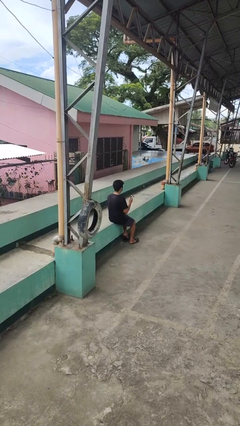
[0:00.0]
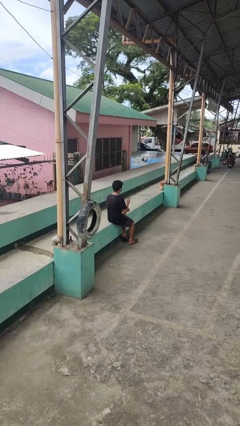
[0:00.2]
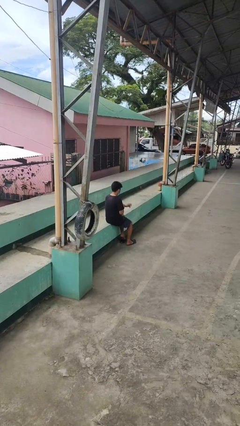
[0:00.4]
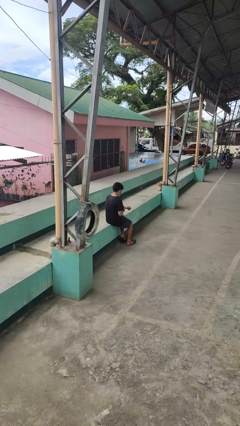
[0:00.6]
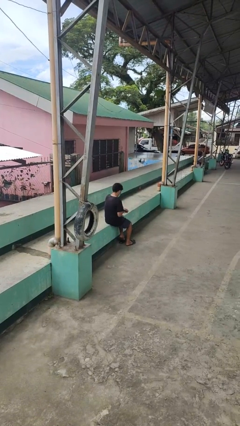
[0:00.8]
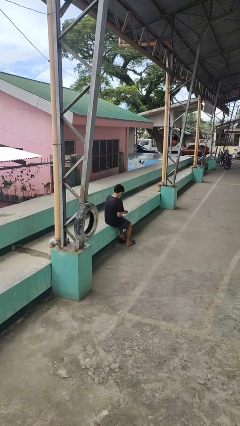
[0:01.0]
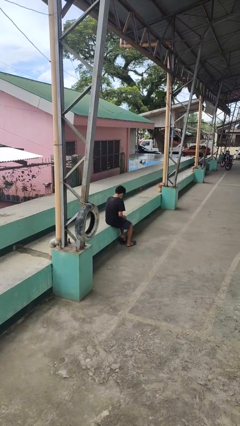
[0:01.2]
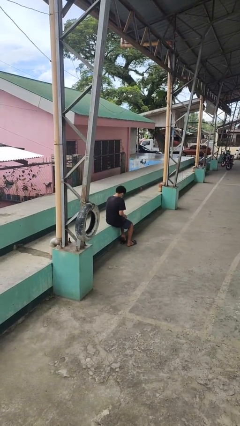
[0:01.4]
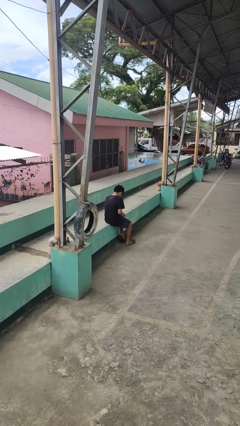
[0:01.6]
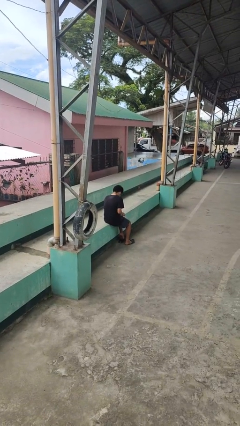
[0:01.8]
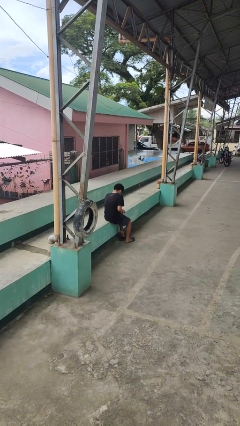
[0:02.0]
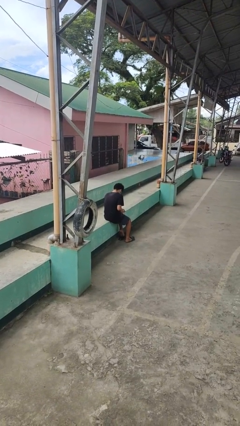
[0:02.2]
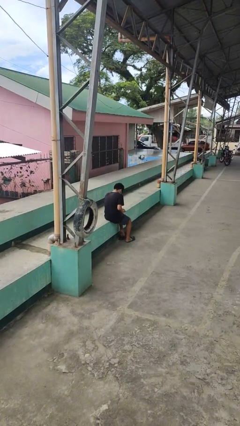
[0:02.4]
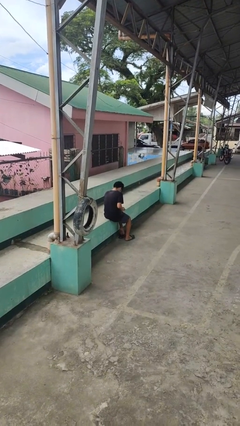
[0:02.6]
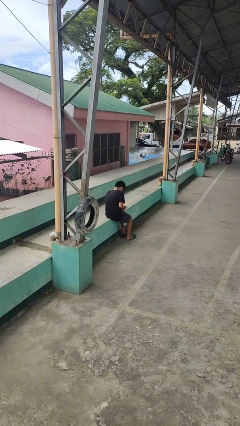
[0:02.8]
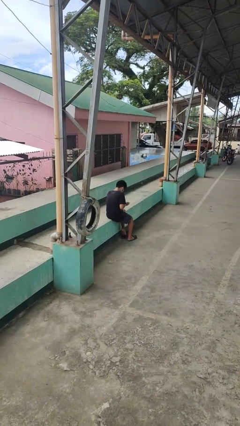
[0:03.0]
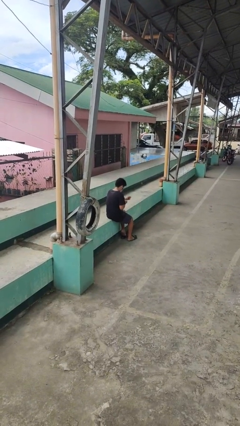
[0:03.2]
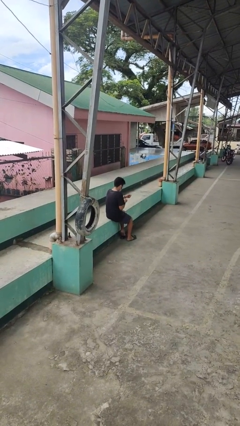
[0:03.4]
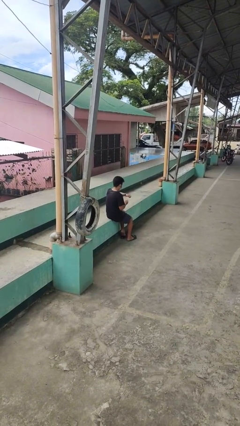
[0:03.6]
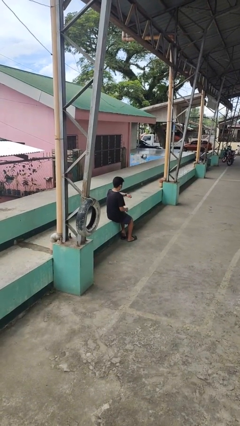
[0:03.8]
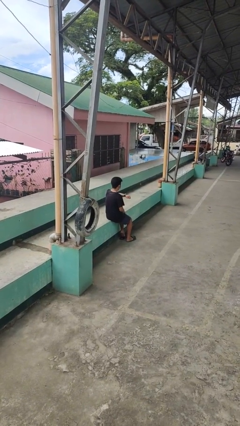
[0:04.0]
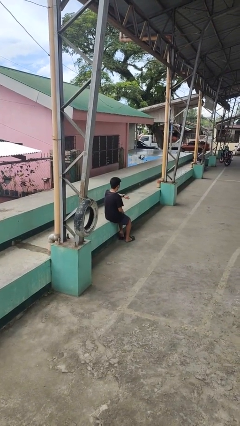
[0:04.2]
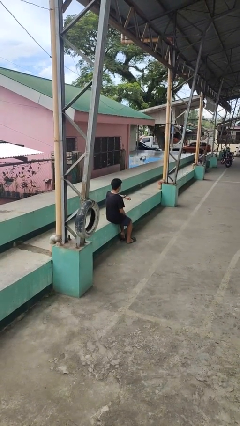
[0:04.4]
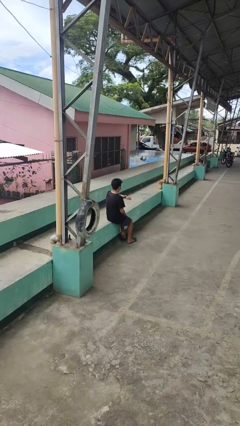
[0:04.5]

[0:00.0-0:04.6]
person puts on wristwatch

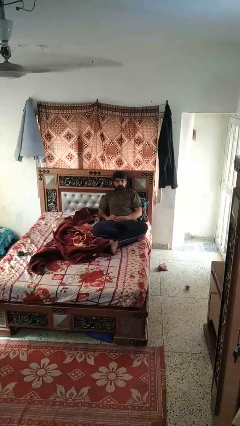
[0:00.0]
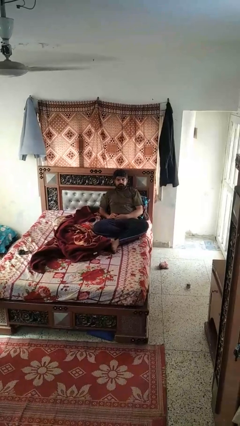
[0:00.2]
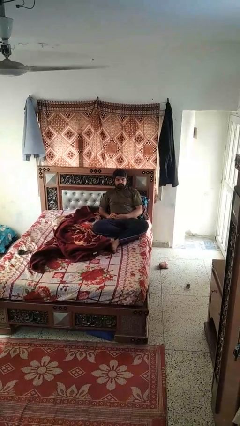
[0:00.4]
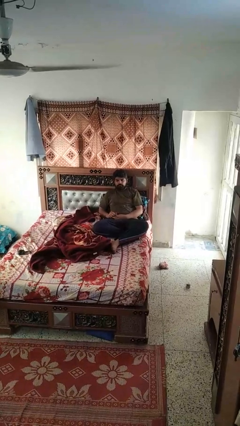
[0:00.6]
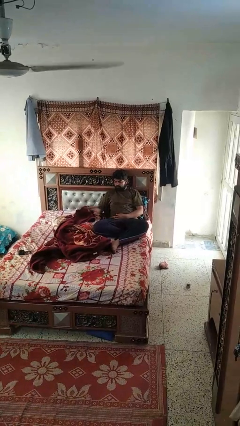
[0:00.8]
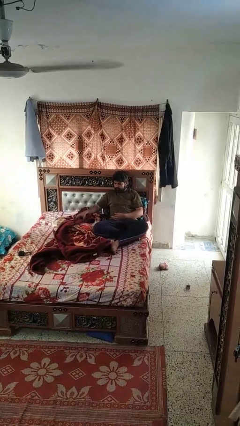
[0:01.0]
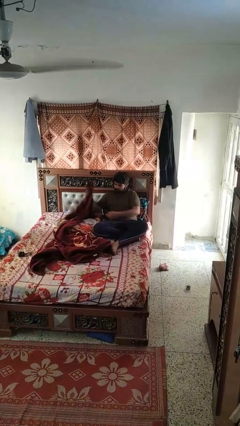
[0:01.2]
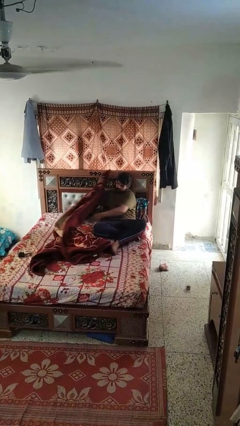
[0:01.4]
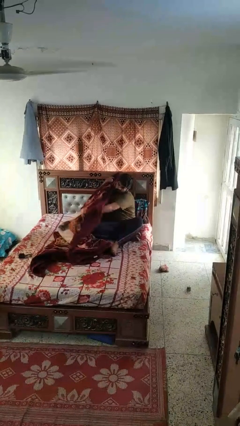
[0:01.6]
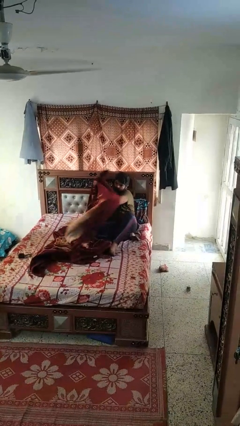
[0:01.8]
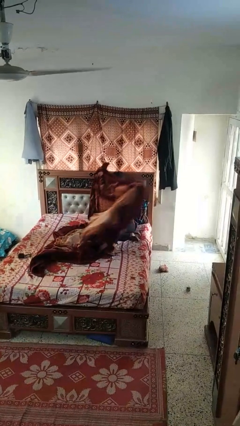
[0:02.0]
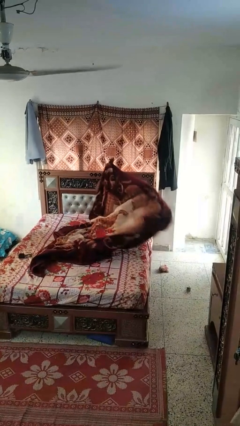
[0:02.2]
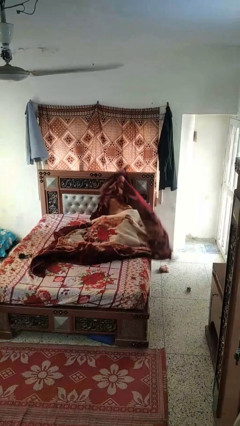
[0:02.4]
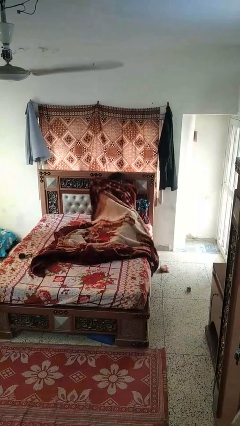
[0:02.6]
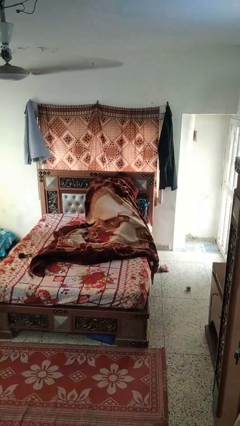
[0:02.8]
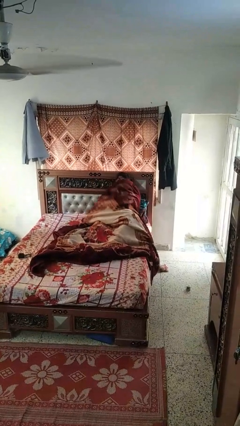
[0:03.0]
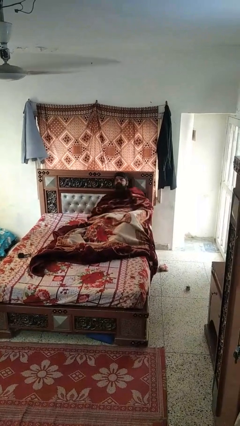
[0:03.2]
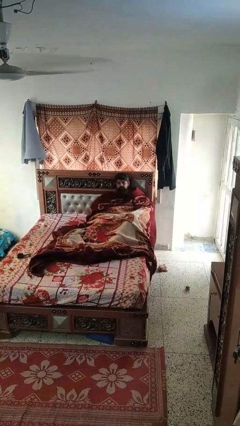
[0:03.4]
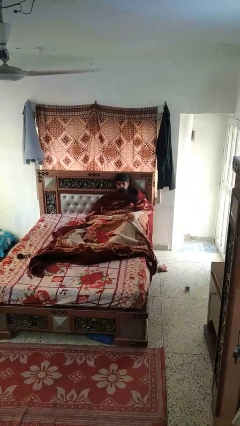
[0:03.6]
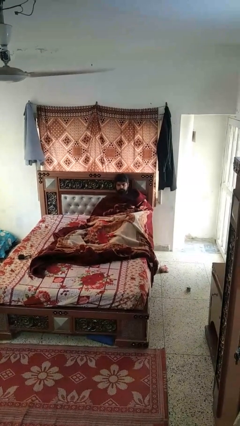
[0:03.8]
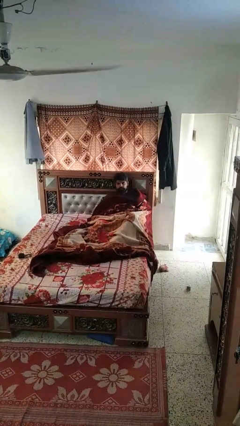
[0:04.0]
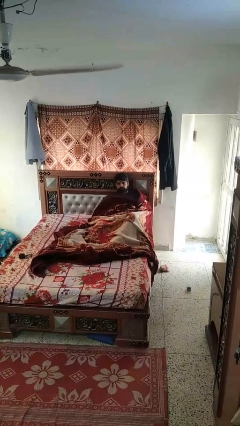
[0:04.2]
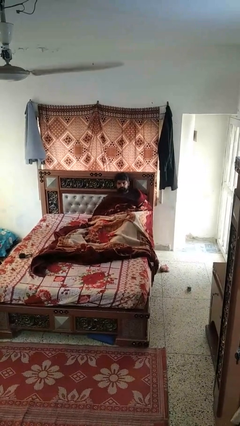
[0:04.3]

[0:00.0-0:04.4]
person covers with blanket

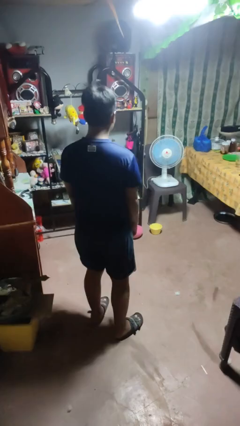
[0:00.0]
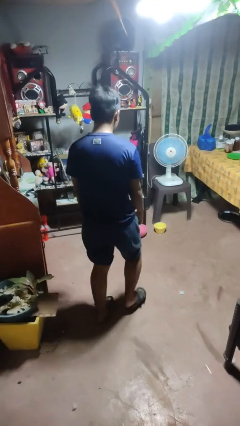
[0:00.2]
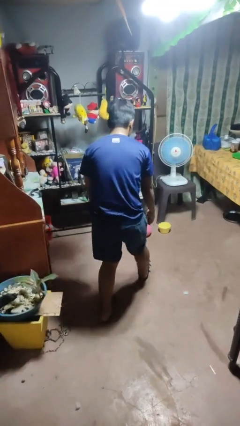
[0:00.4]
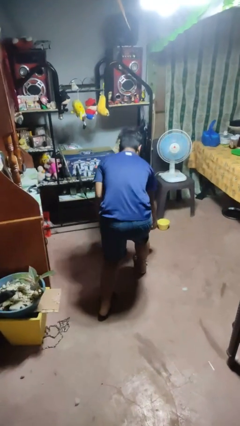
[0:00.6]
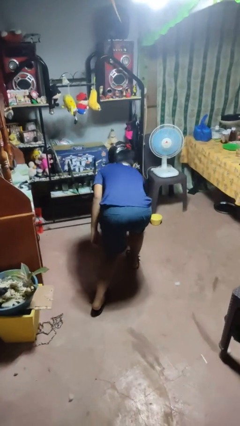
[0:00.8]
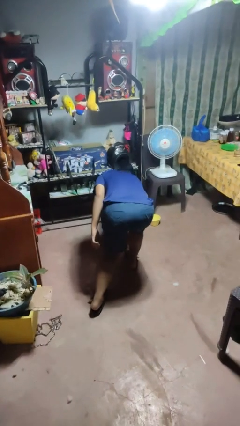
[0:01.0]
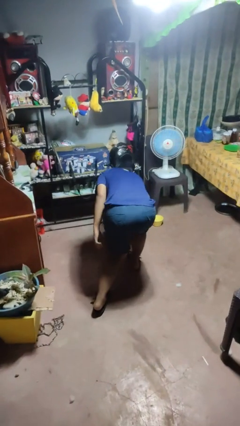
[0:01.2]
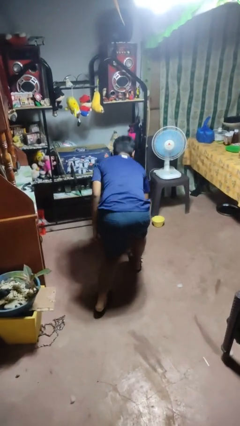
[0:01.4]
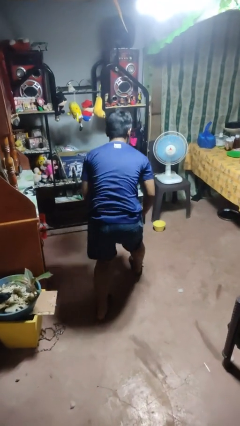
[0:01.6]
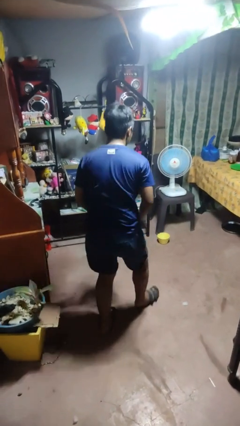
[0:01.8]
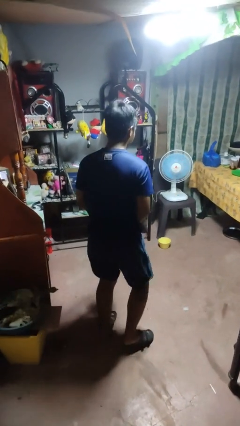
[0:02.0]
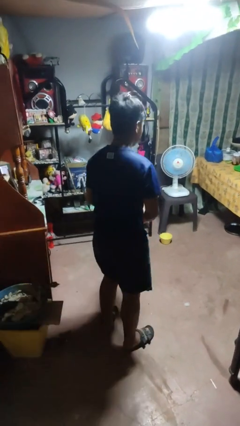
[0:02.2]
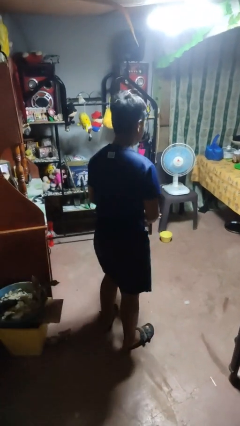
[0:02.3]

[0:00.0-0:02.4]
person picks up object from floor

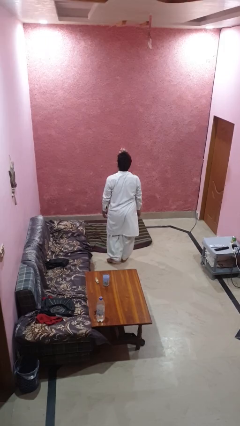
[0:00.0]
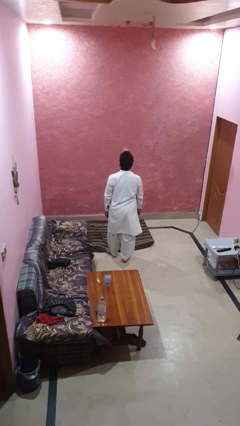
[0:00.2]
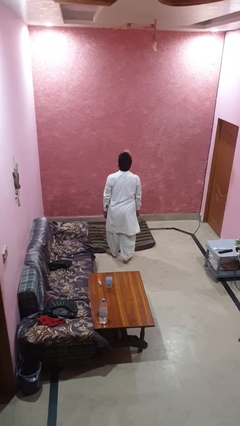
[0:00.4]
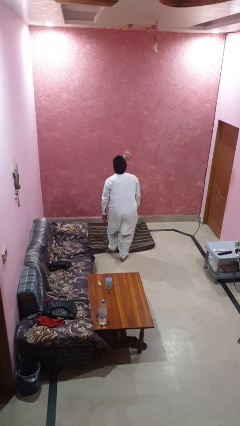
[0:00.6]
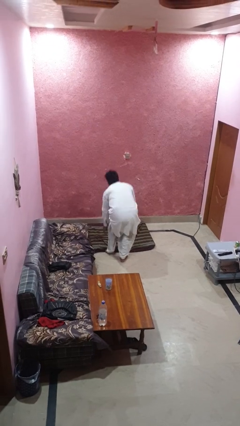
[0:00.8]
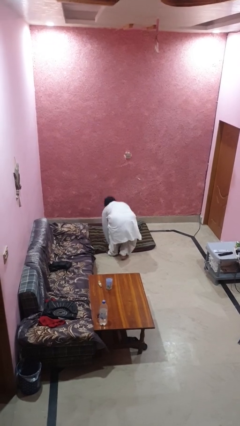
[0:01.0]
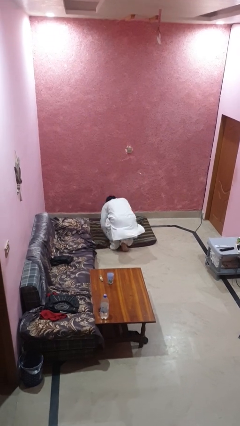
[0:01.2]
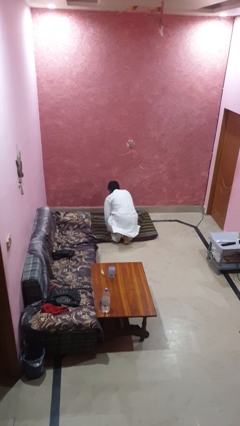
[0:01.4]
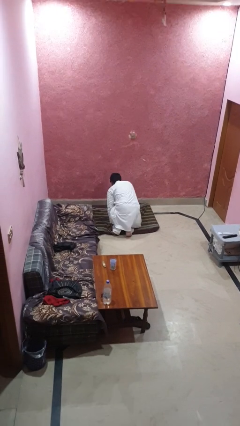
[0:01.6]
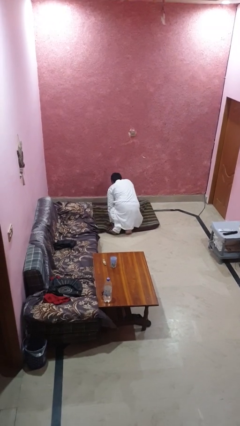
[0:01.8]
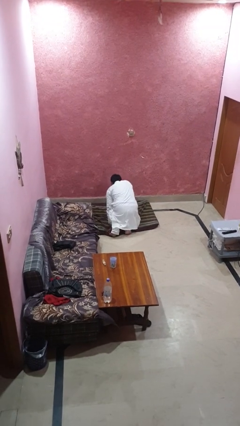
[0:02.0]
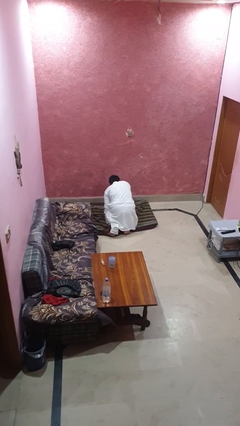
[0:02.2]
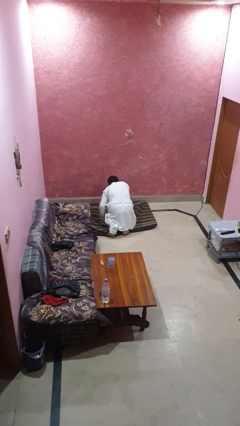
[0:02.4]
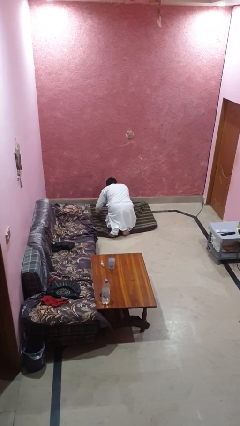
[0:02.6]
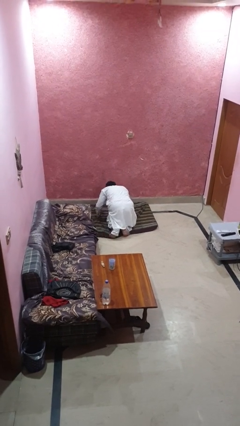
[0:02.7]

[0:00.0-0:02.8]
person trips on object on floor

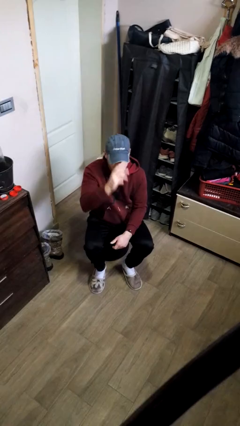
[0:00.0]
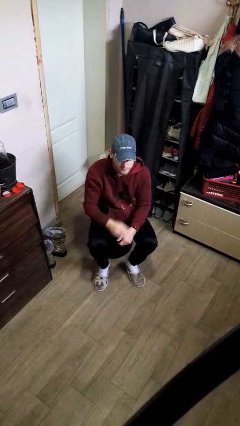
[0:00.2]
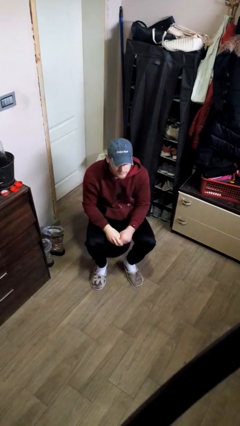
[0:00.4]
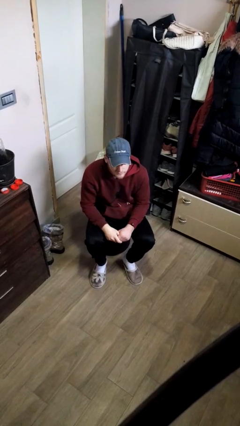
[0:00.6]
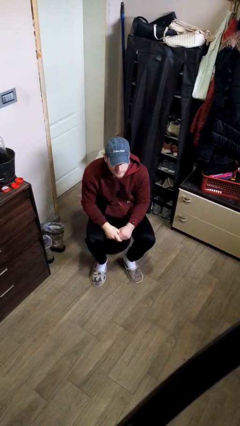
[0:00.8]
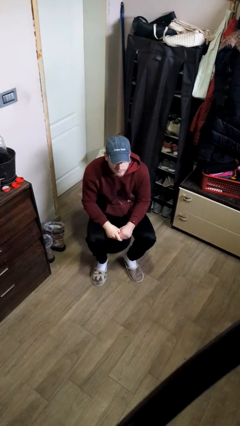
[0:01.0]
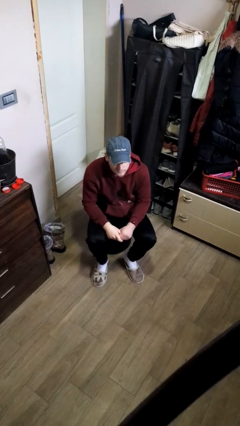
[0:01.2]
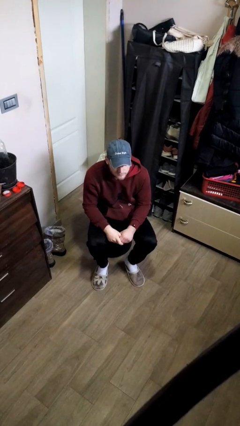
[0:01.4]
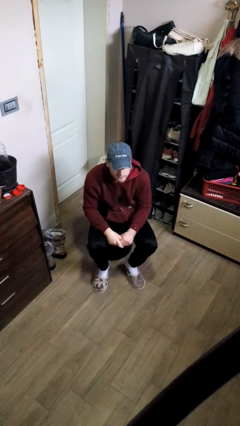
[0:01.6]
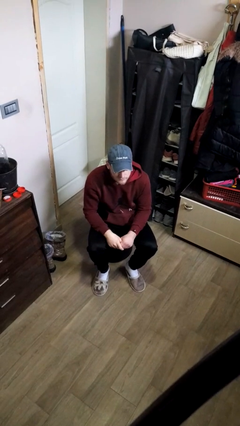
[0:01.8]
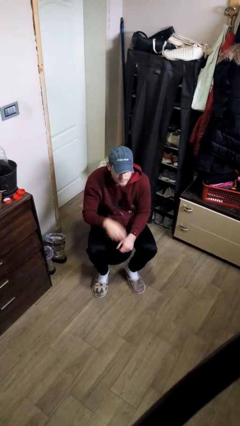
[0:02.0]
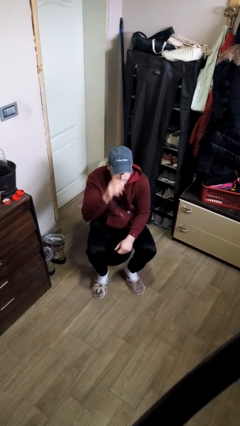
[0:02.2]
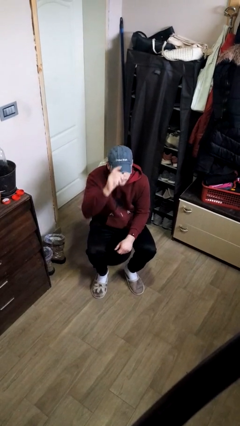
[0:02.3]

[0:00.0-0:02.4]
person puts on hat

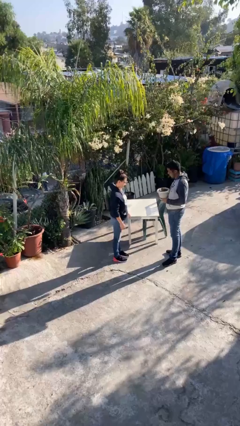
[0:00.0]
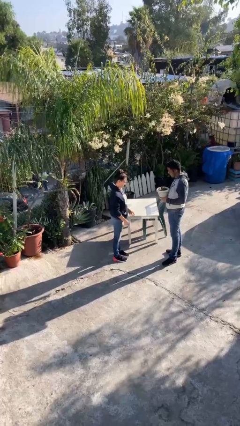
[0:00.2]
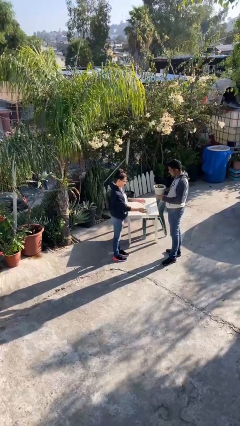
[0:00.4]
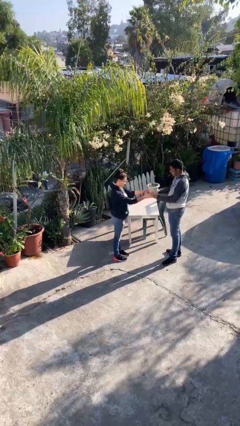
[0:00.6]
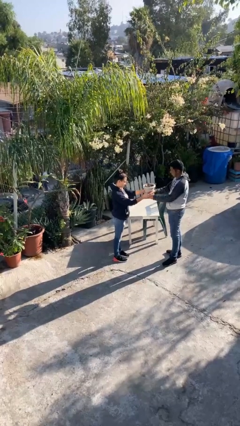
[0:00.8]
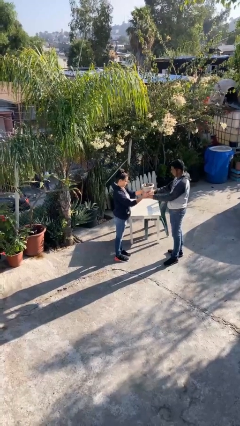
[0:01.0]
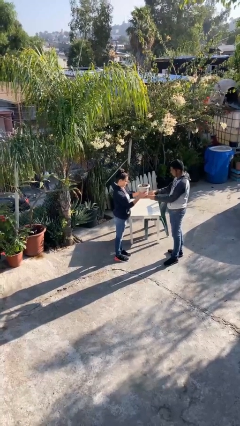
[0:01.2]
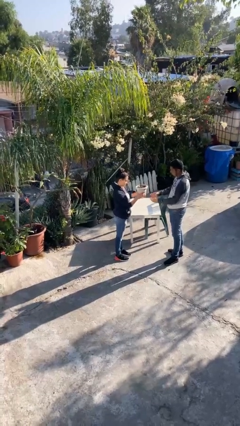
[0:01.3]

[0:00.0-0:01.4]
person transfers object to person
